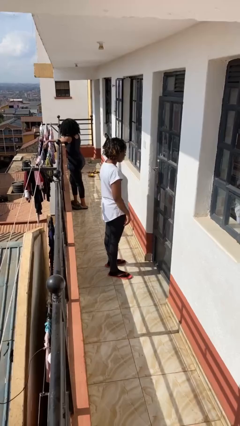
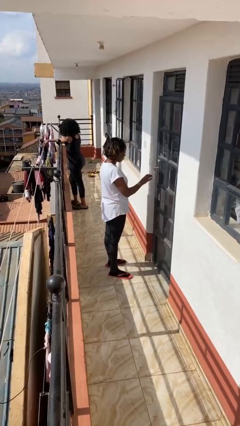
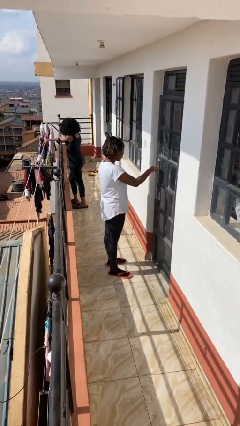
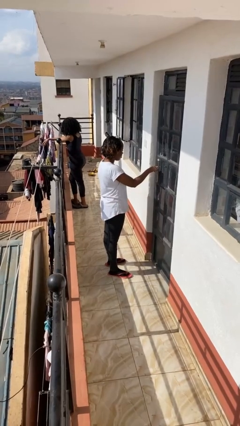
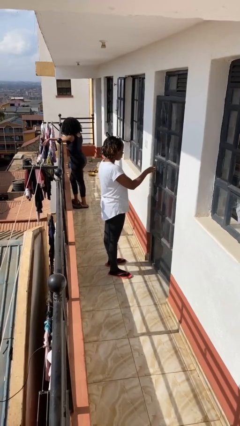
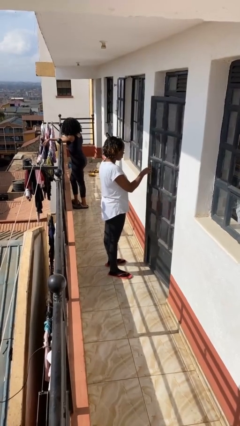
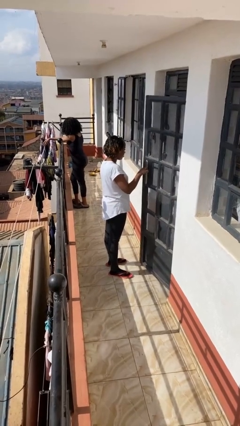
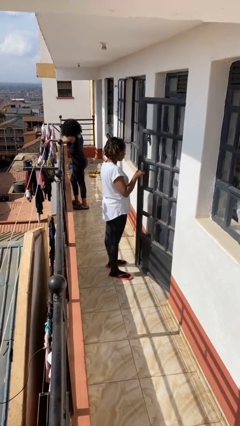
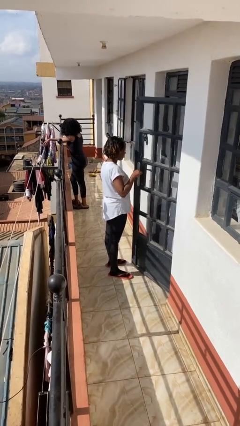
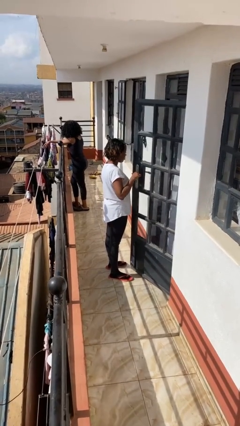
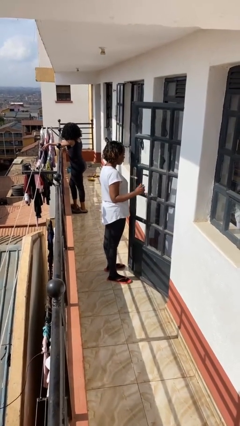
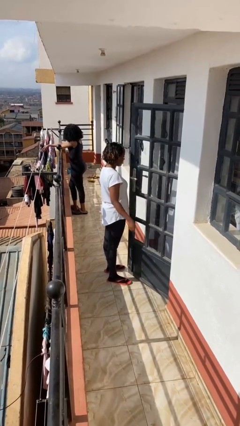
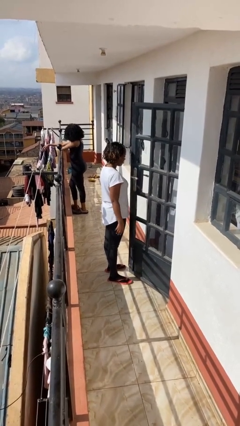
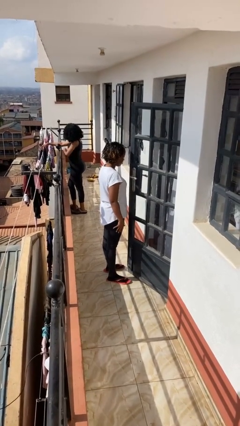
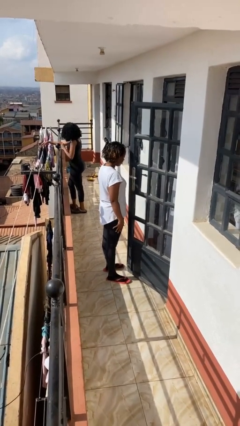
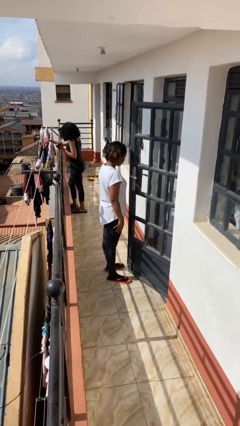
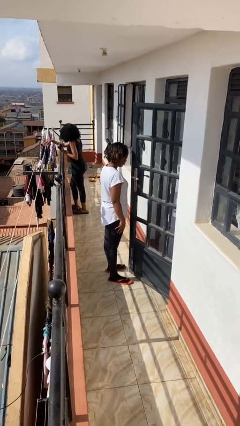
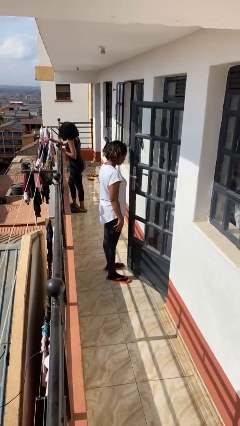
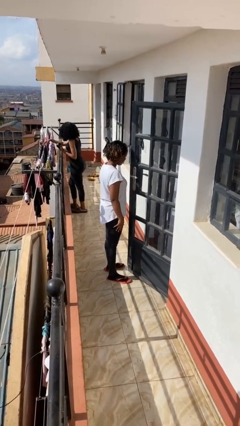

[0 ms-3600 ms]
person opens facility door

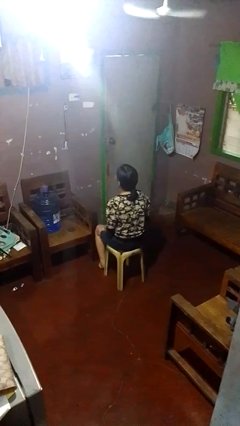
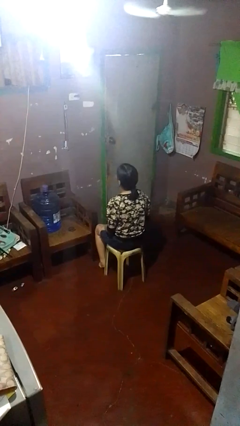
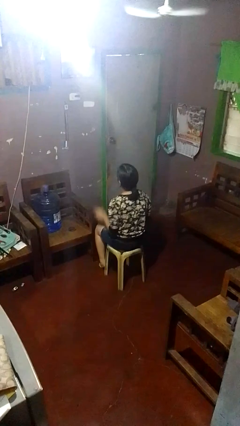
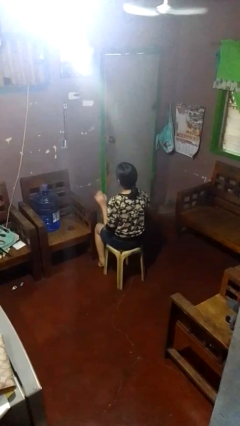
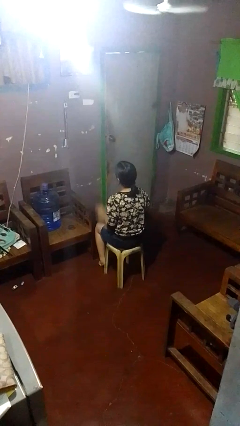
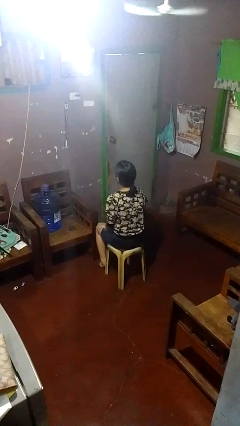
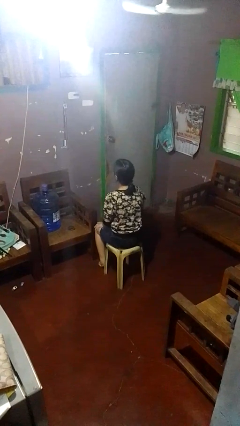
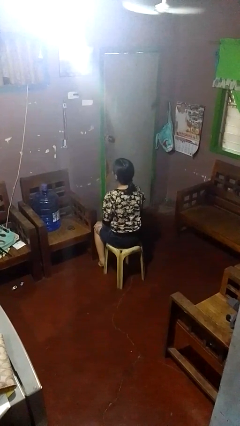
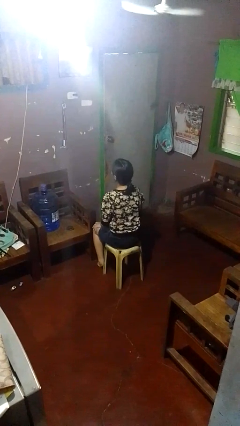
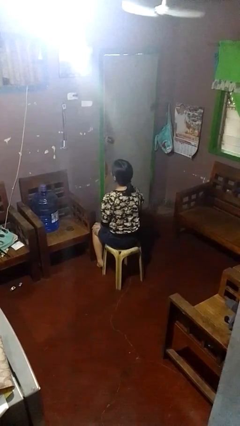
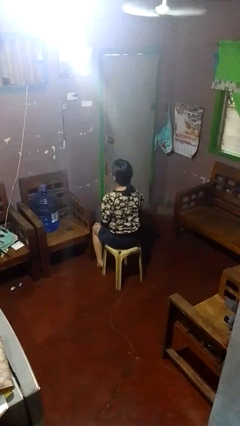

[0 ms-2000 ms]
person slaps hands on thighs

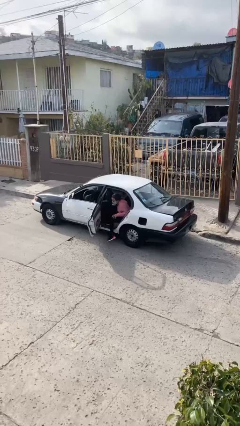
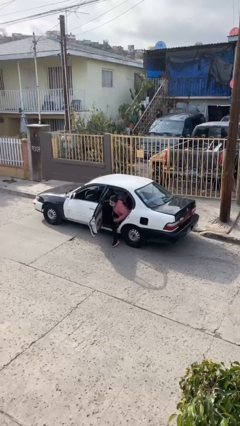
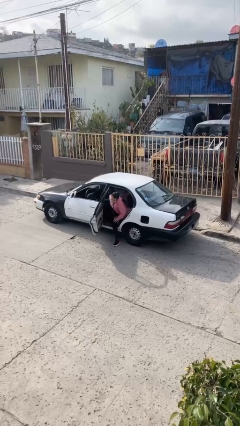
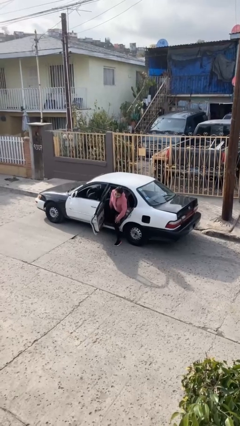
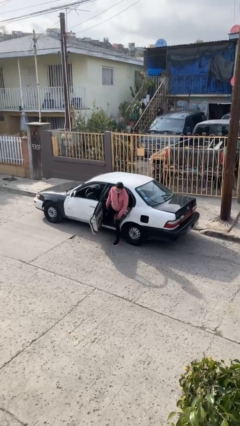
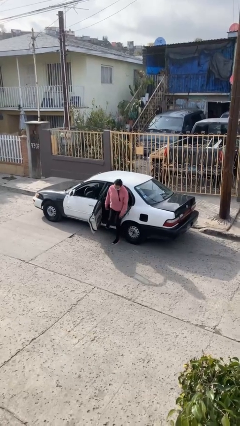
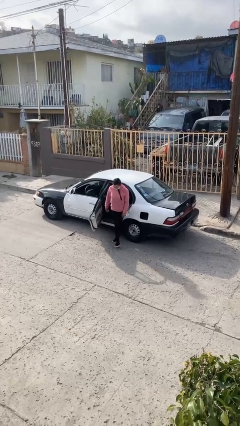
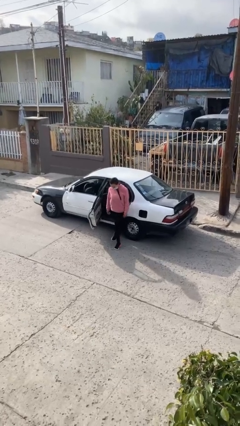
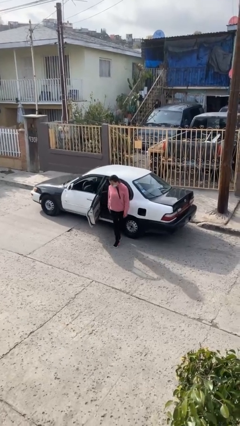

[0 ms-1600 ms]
person exits car

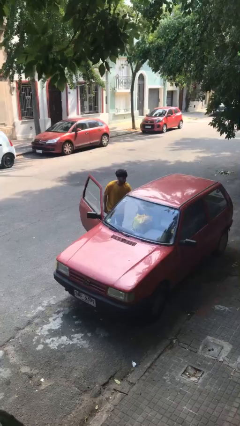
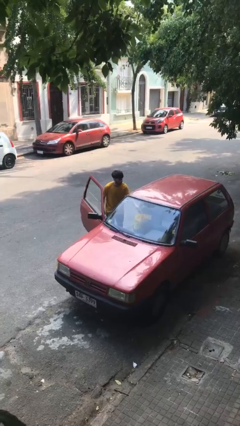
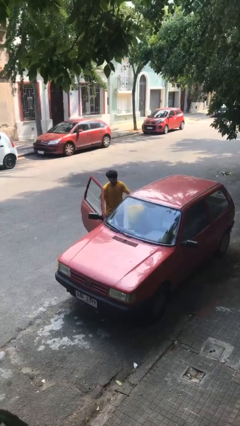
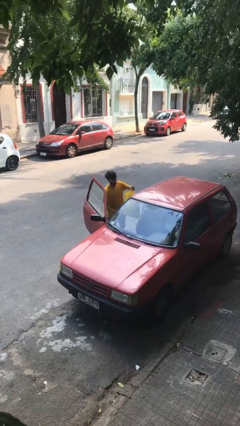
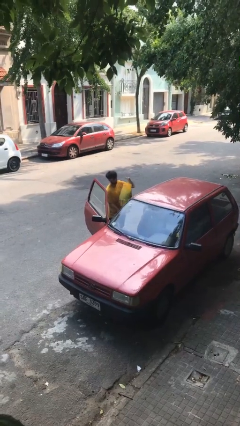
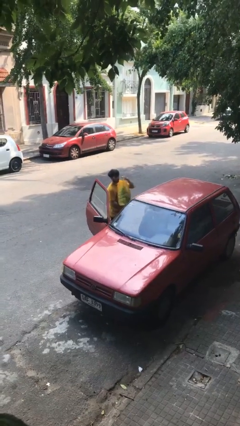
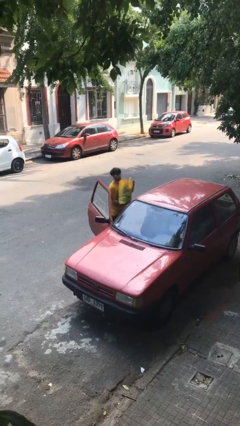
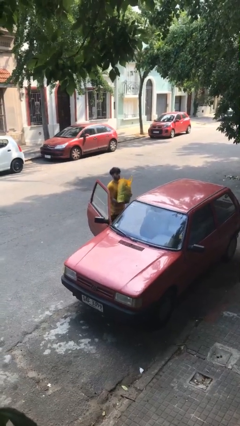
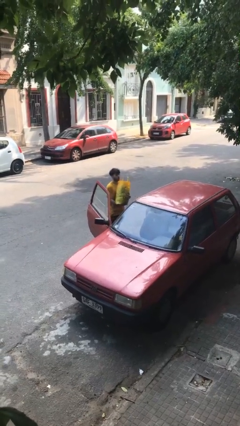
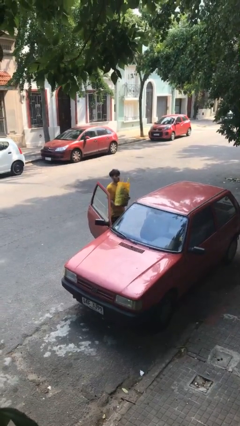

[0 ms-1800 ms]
person unloads car

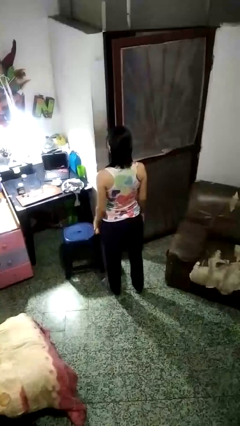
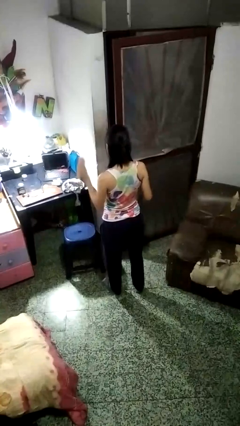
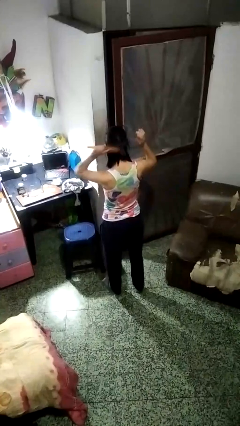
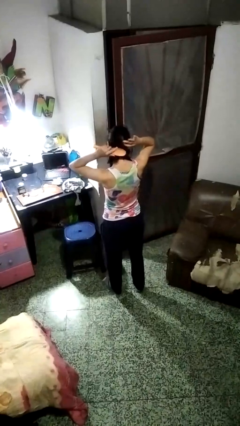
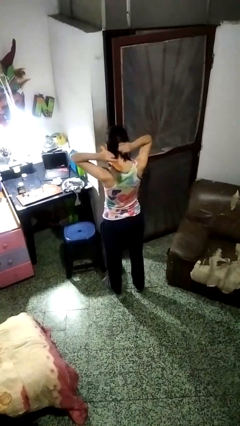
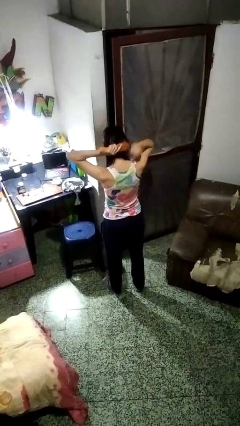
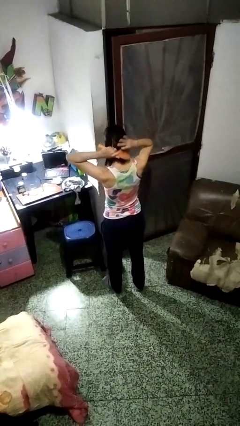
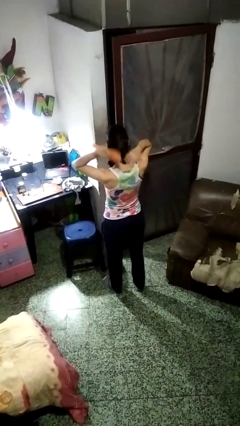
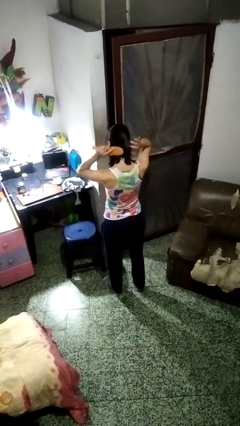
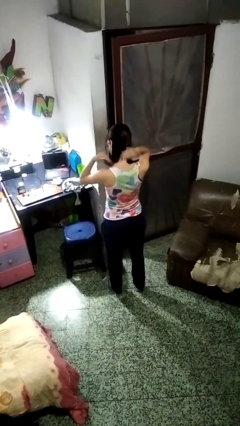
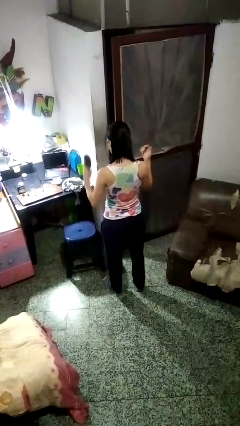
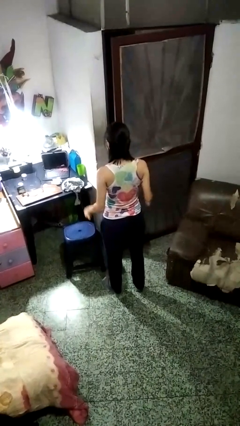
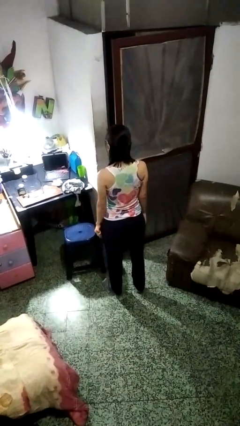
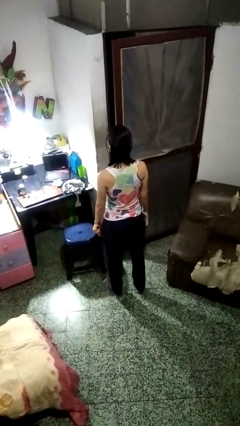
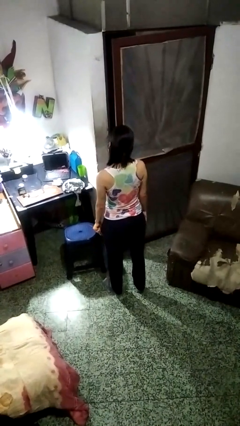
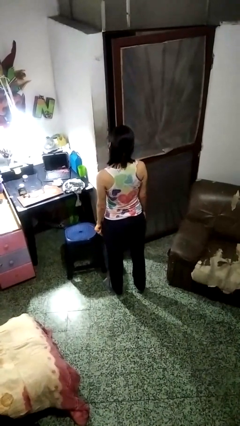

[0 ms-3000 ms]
person brushes hair

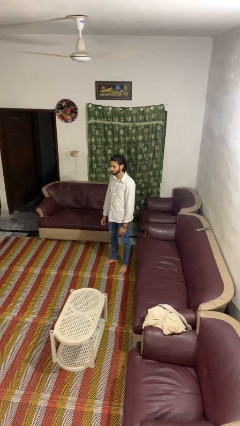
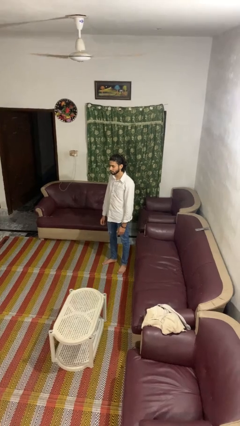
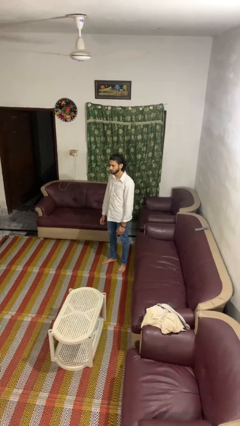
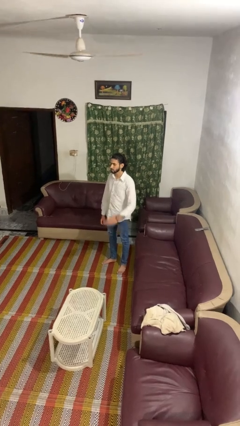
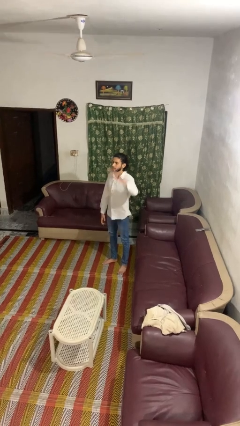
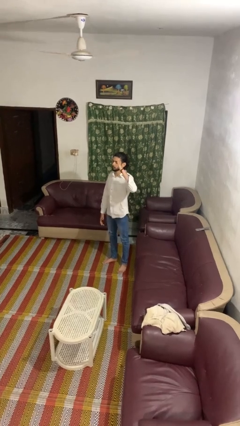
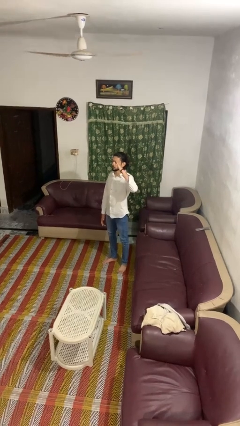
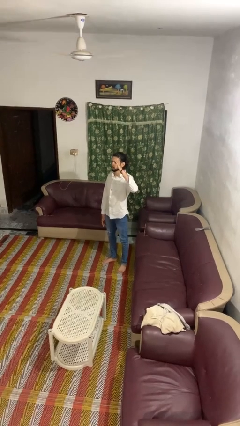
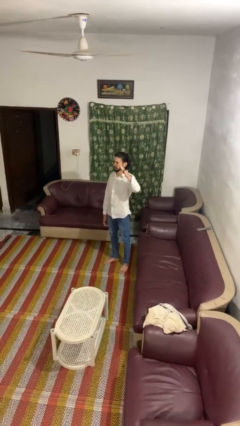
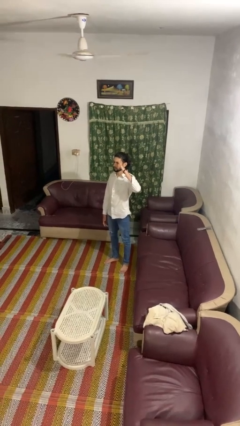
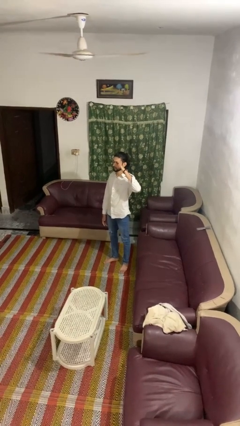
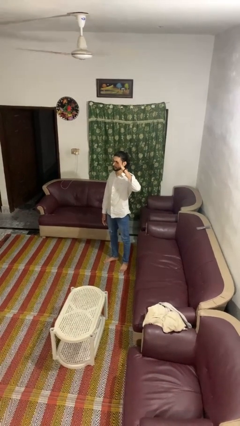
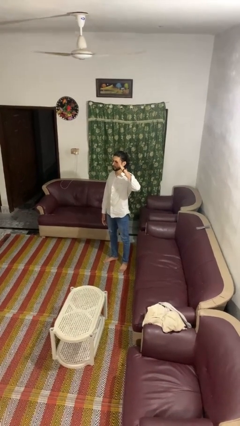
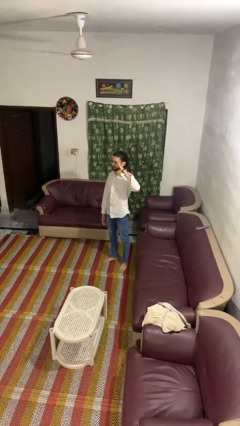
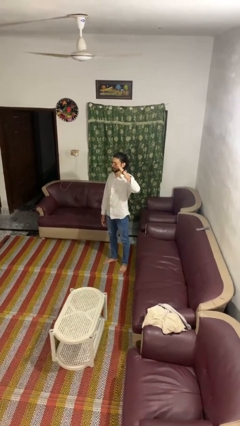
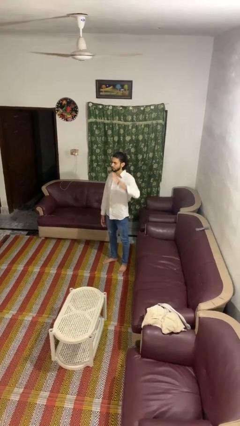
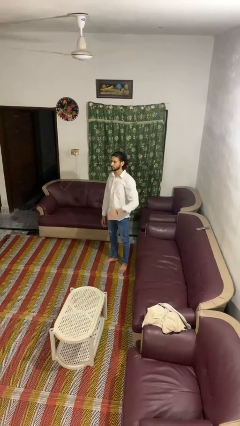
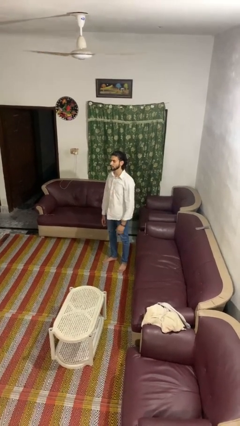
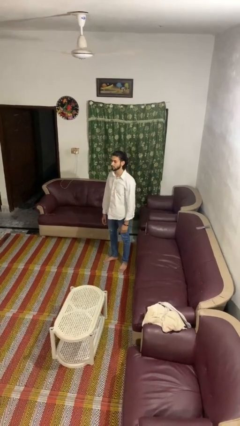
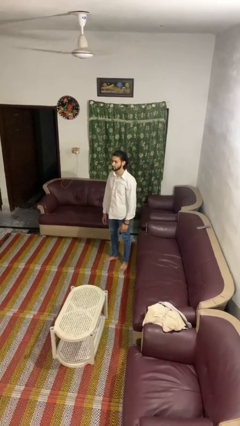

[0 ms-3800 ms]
person salutes

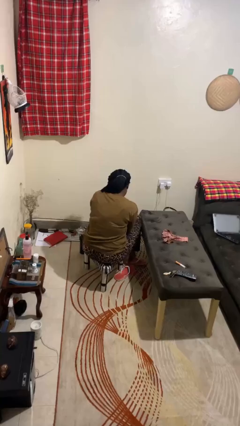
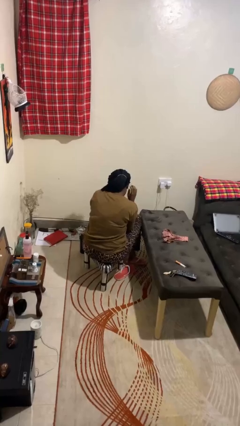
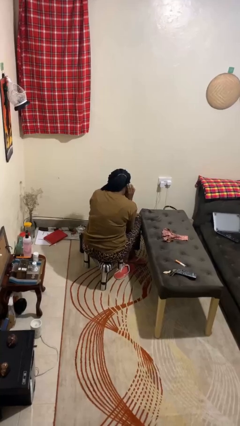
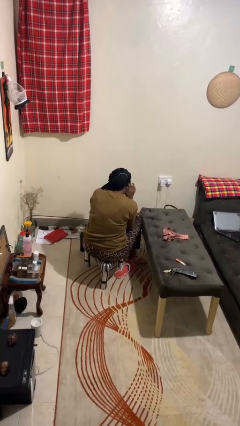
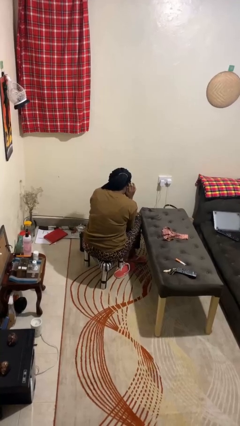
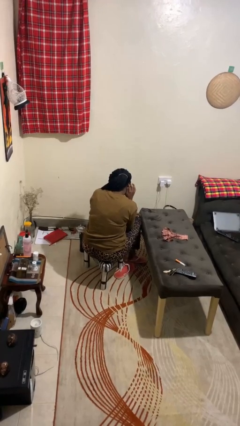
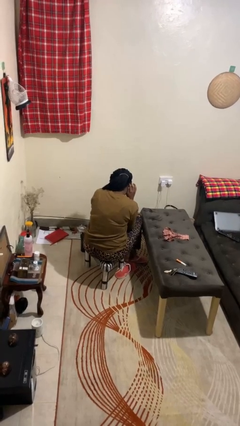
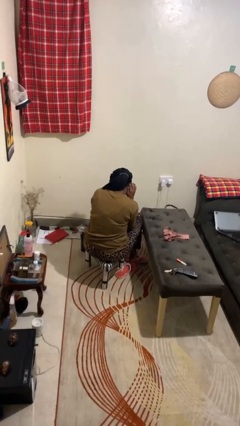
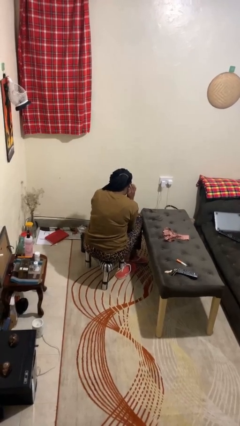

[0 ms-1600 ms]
person gestures listen closely
